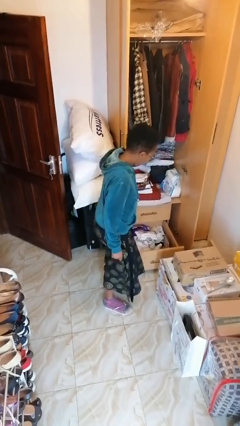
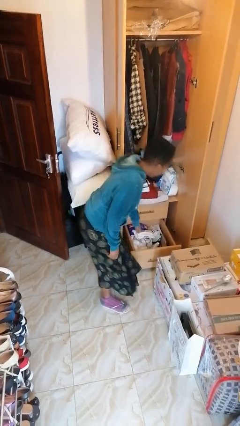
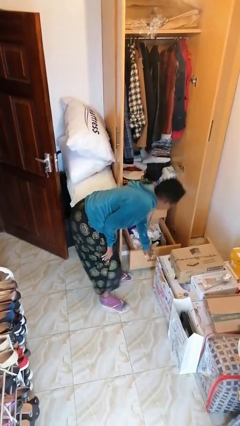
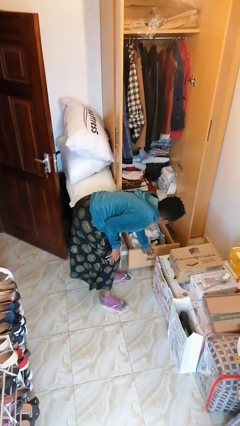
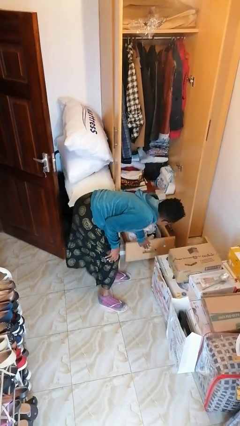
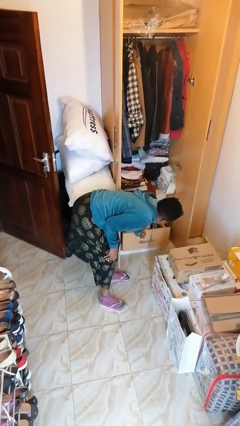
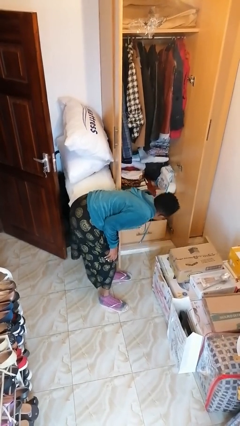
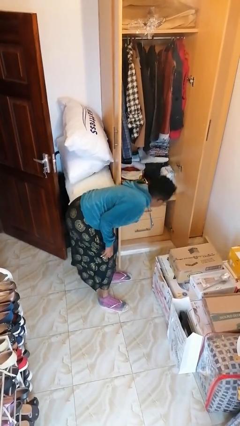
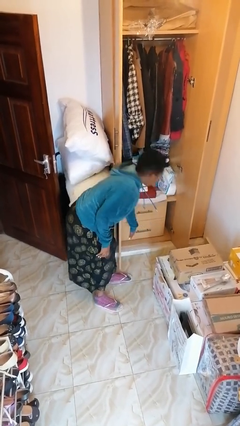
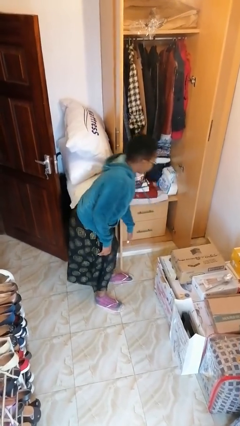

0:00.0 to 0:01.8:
person closes dresser drawer

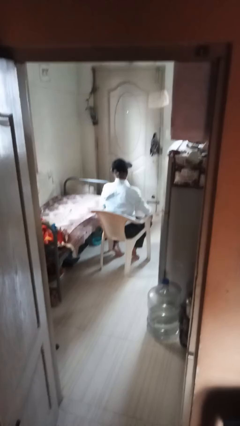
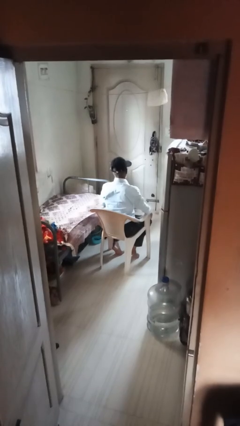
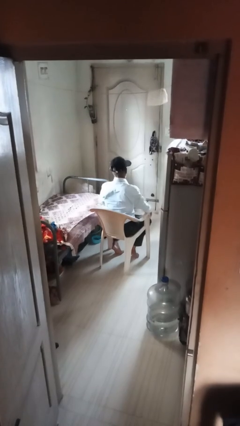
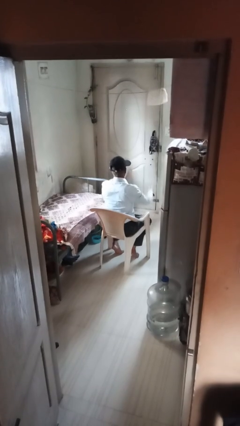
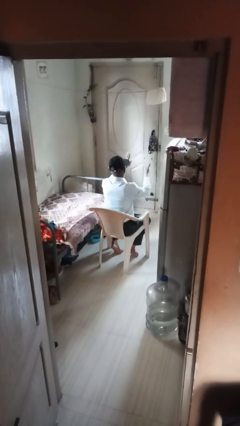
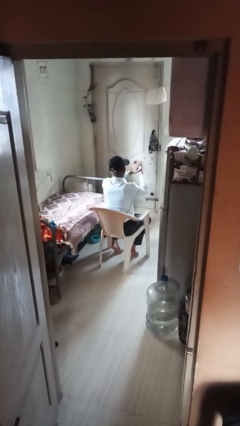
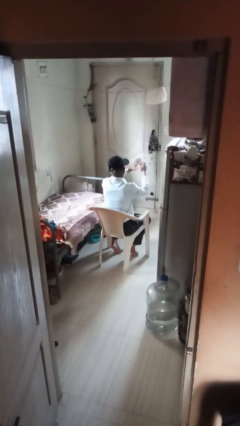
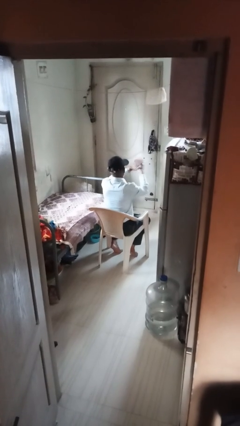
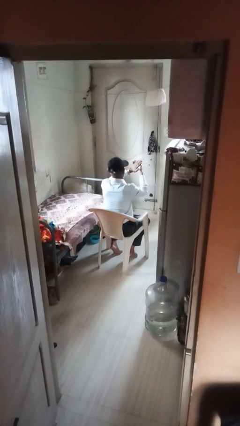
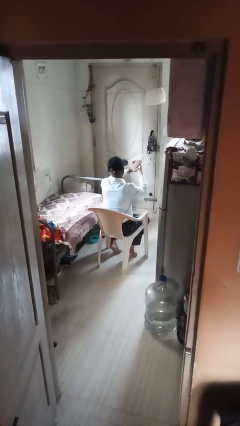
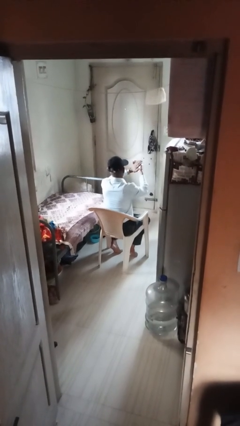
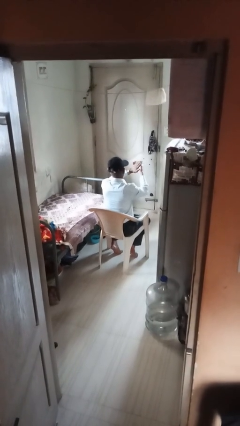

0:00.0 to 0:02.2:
person claps hands

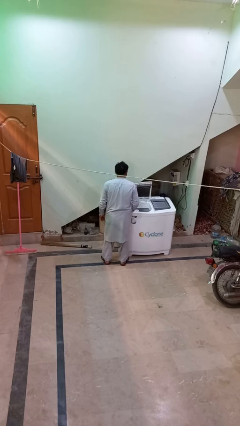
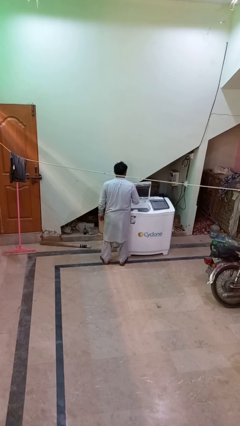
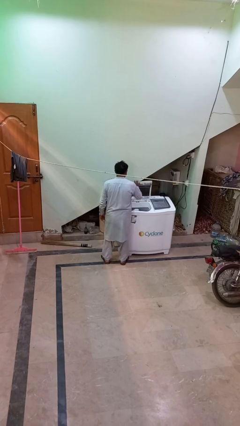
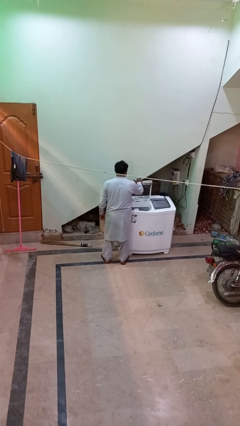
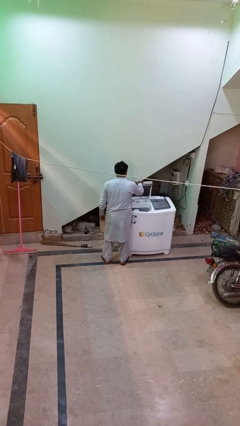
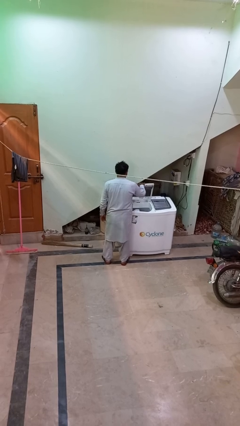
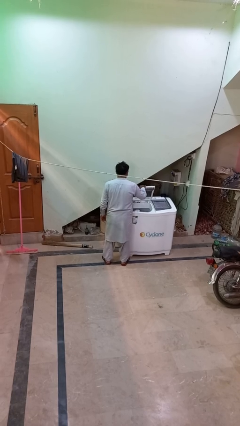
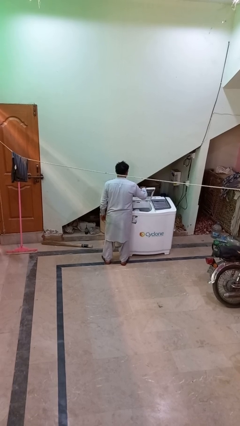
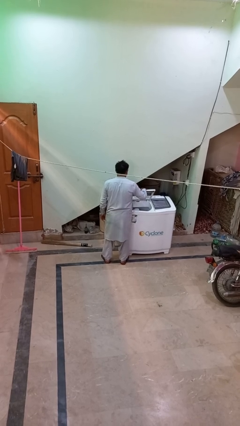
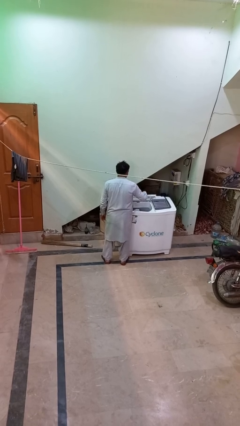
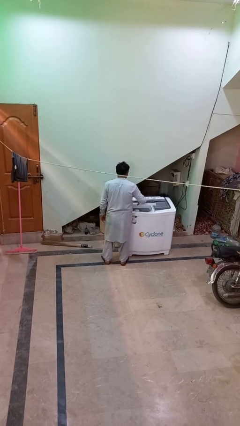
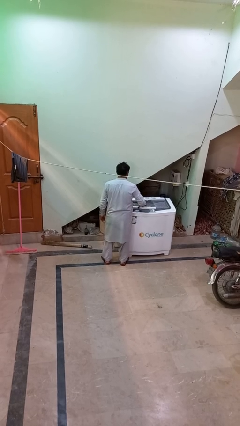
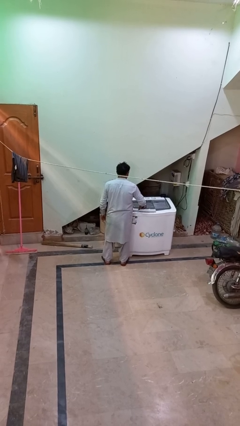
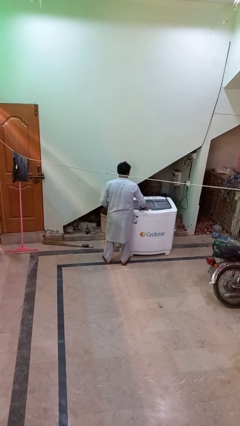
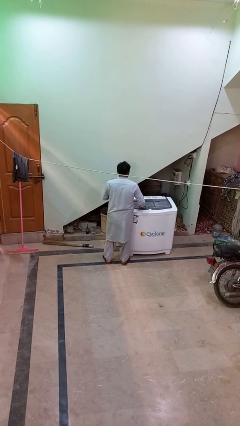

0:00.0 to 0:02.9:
person closes clothes washer

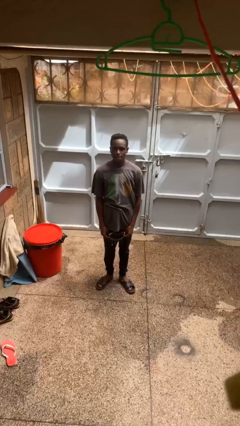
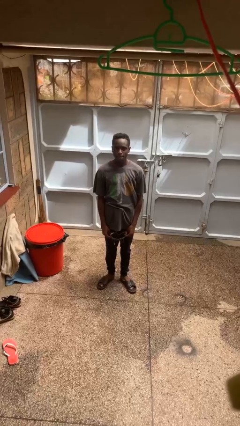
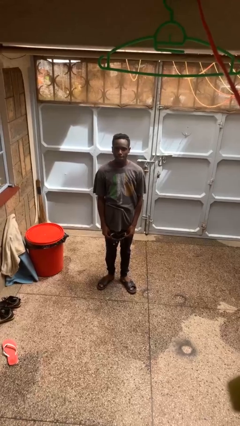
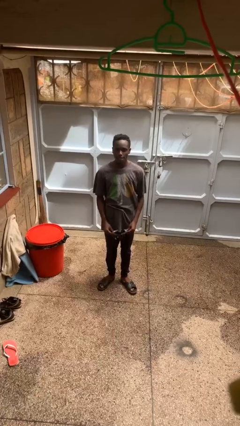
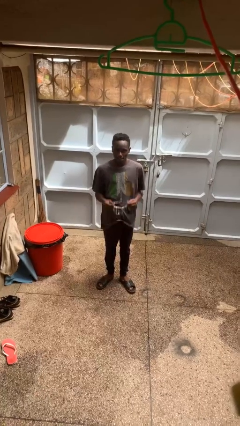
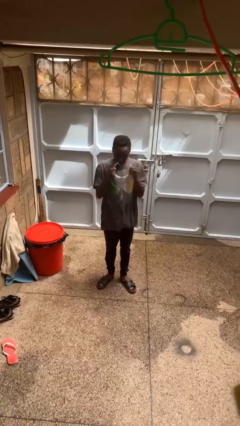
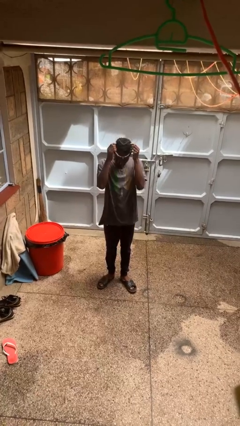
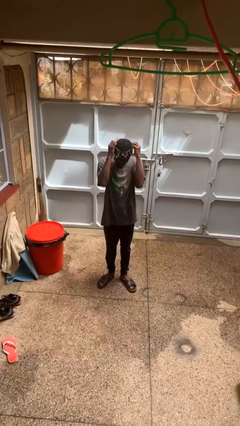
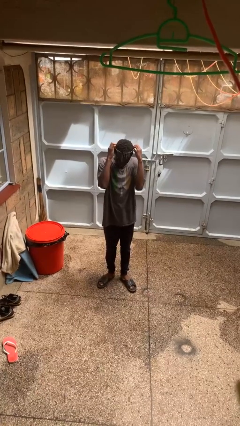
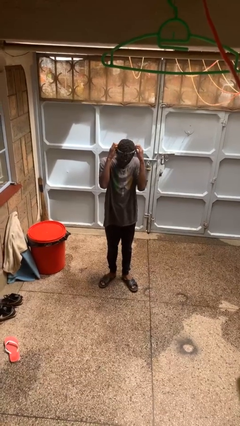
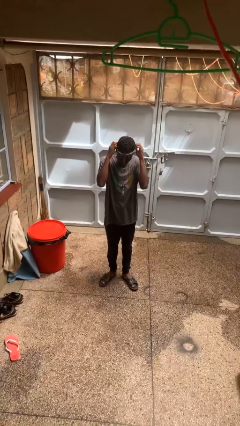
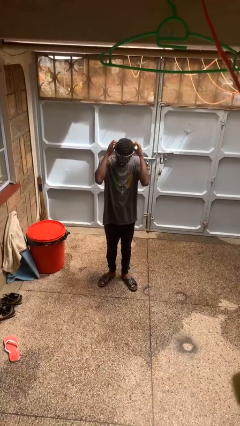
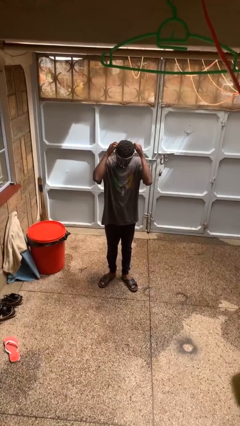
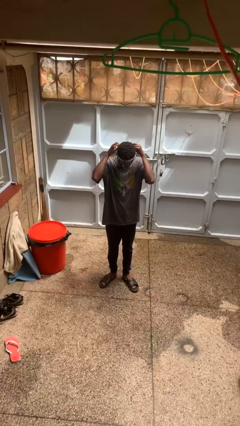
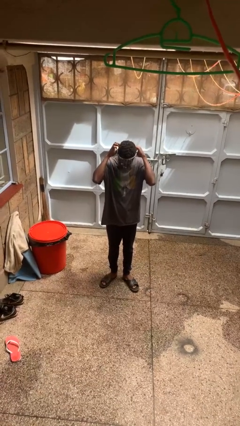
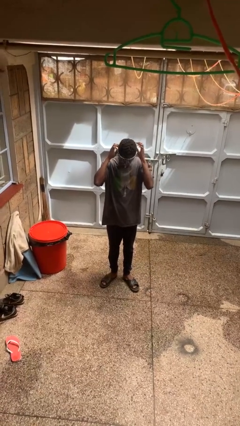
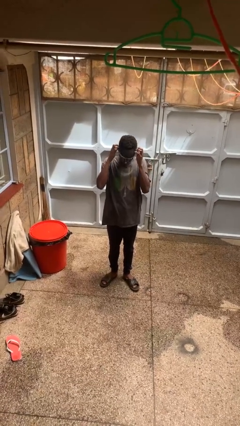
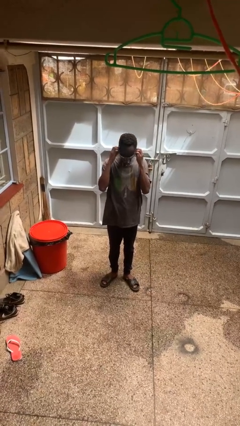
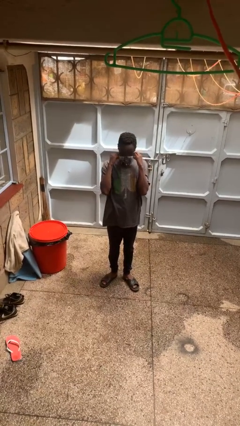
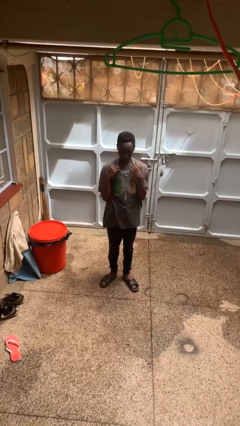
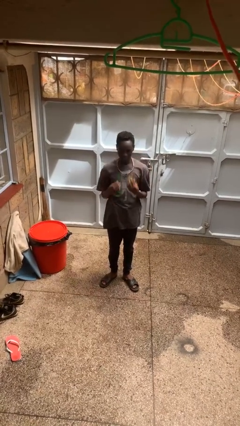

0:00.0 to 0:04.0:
person puts on necklace

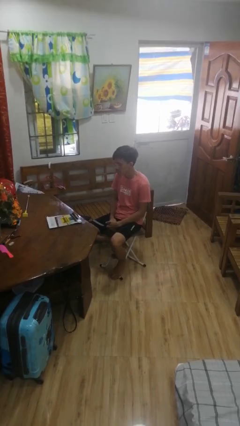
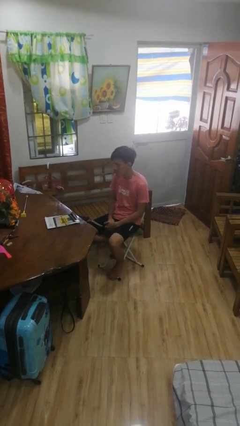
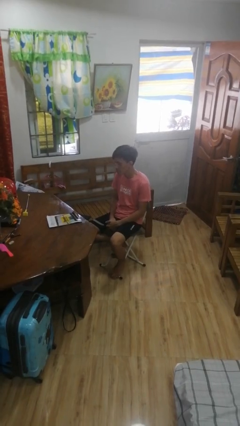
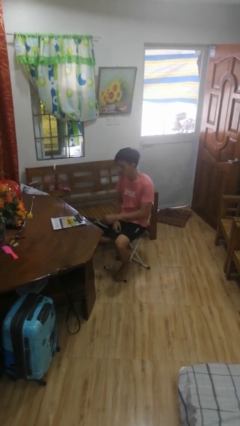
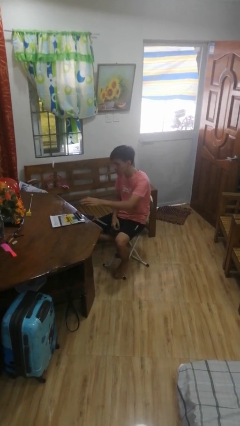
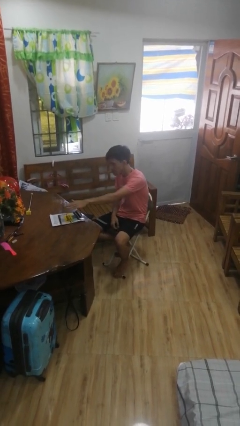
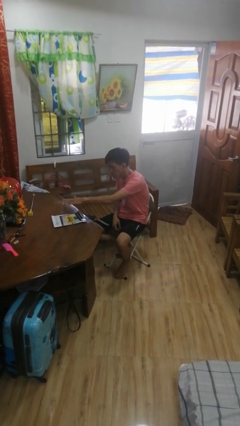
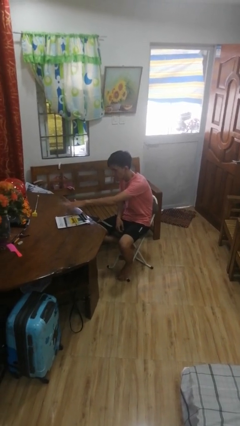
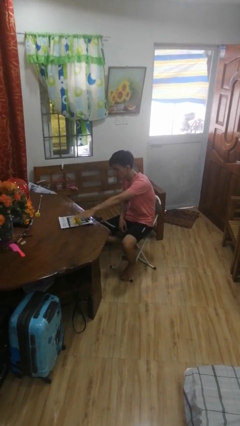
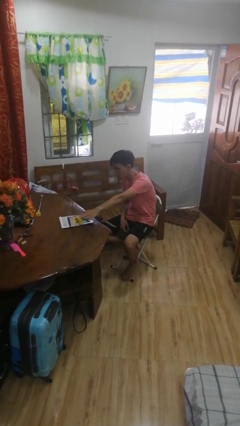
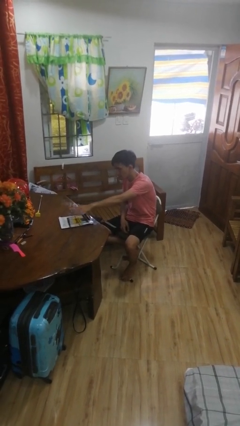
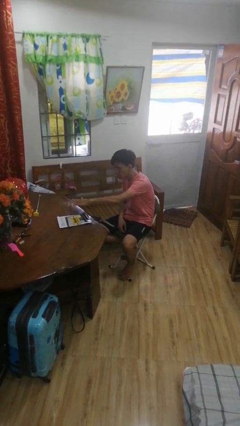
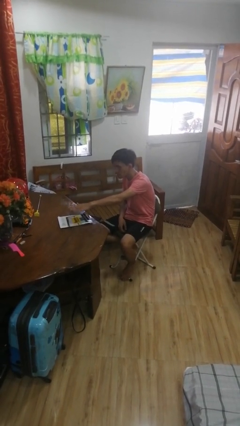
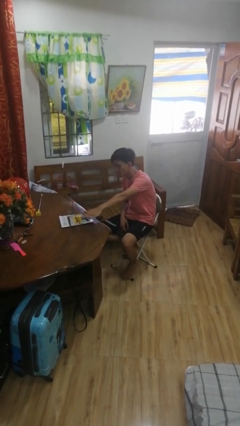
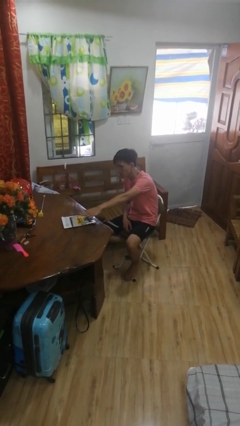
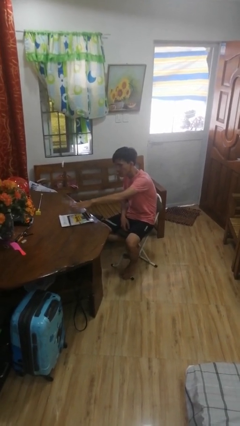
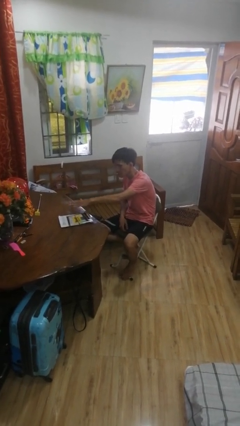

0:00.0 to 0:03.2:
person waves hand over object

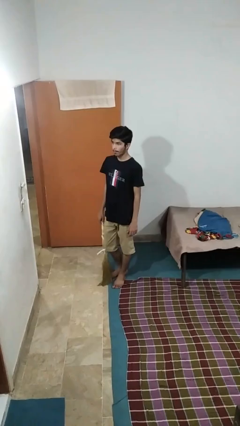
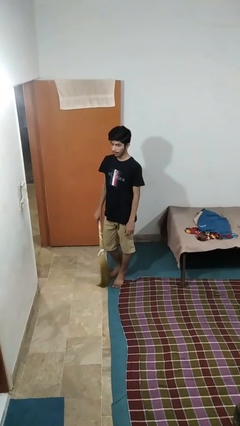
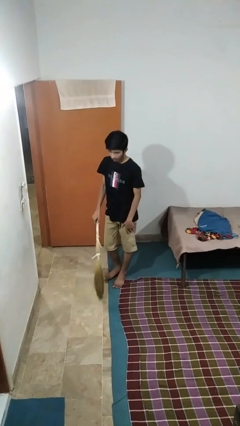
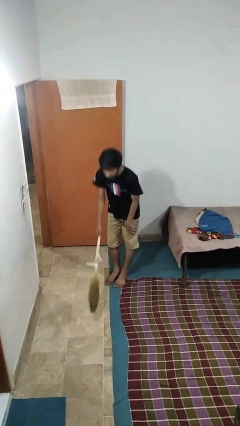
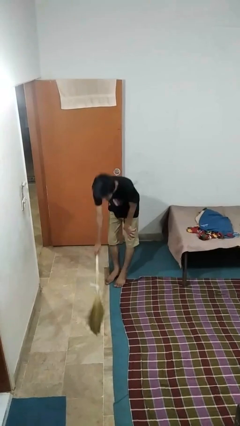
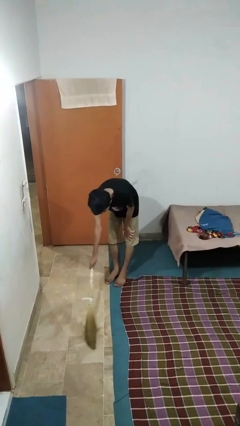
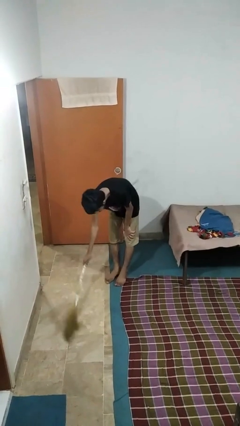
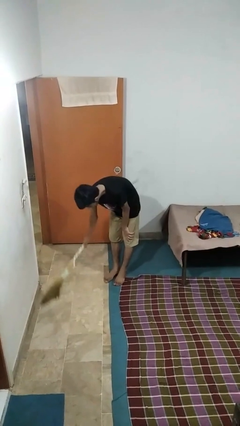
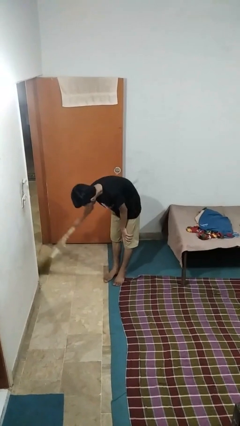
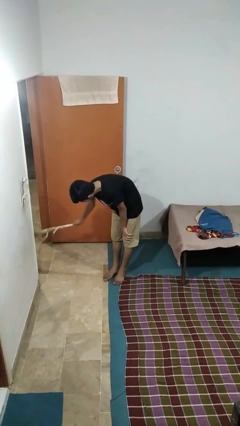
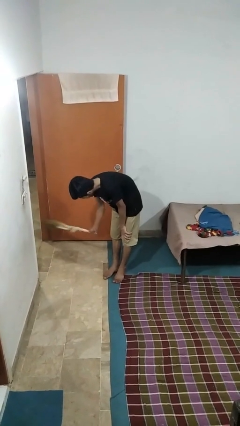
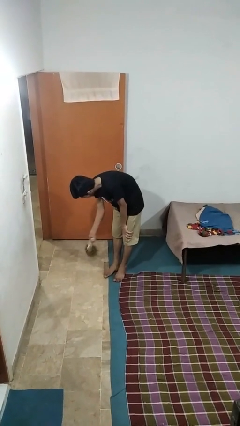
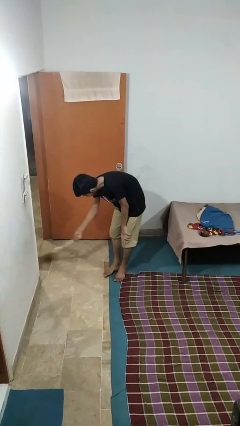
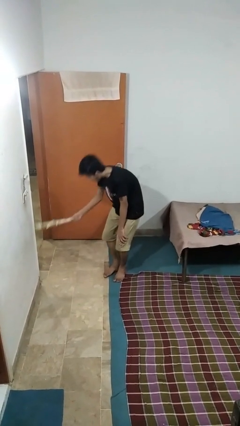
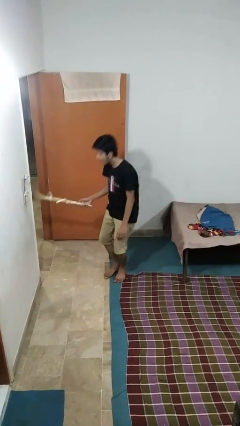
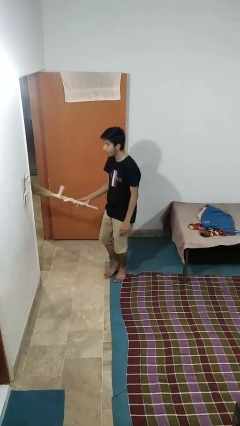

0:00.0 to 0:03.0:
person sweeps floor

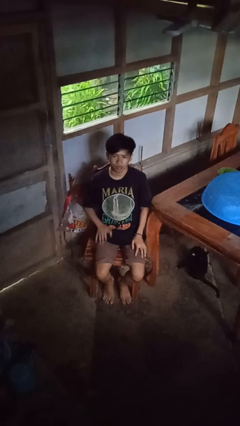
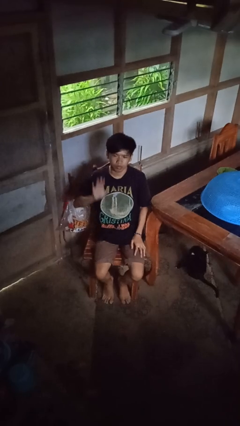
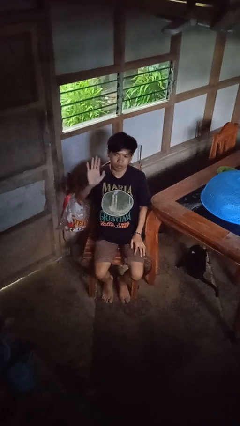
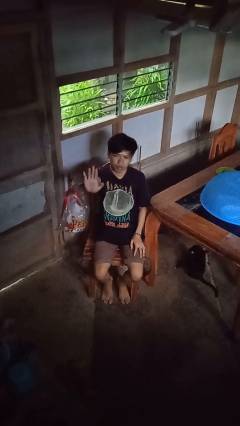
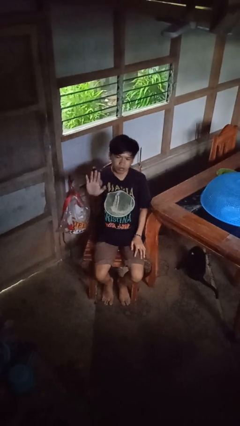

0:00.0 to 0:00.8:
person gestures stop
